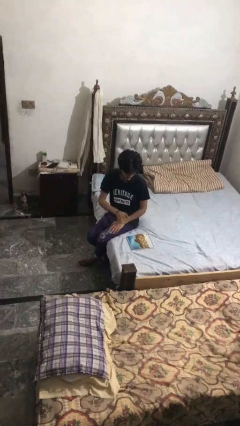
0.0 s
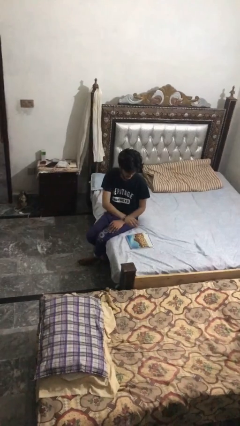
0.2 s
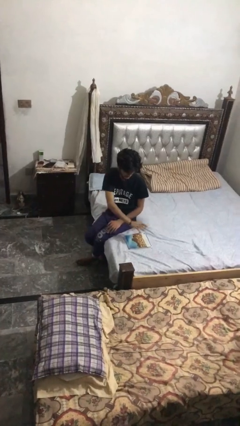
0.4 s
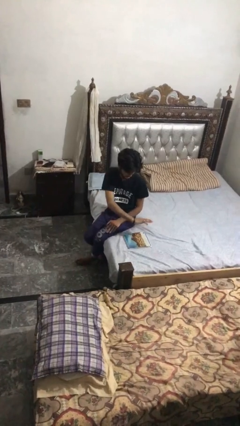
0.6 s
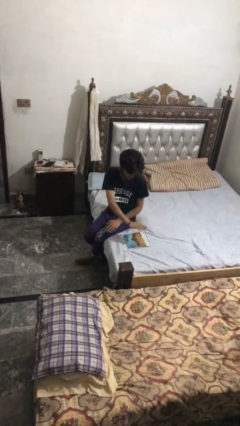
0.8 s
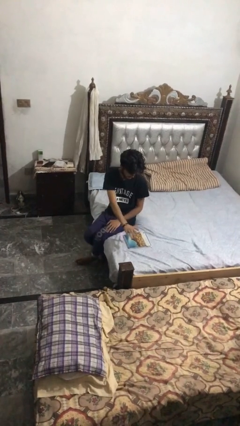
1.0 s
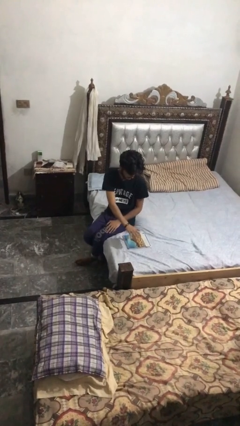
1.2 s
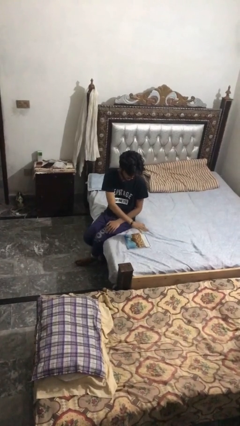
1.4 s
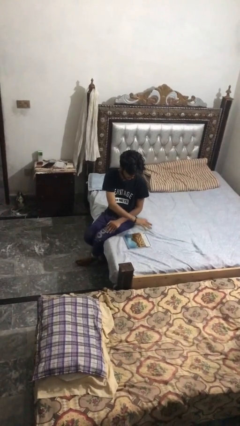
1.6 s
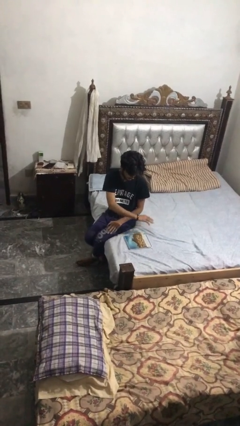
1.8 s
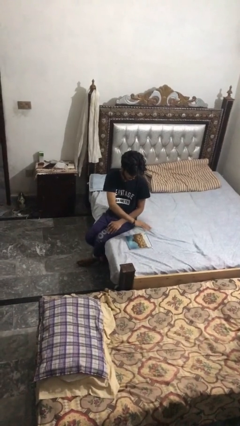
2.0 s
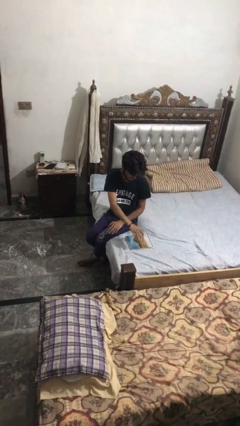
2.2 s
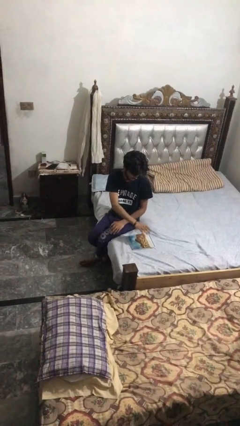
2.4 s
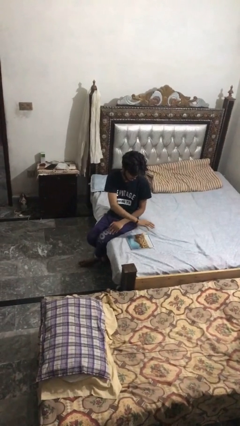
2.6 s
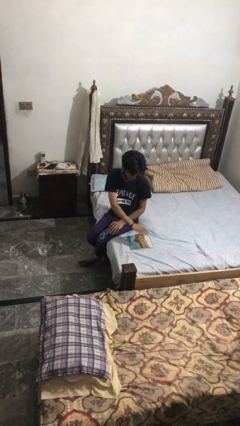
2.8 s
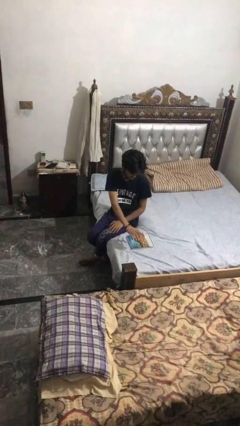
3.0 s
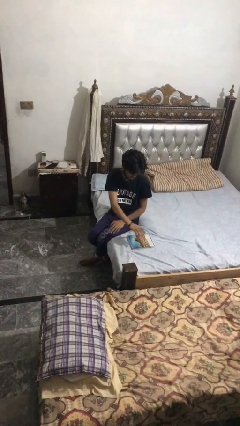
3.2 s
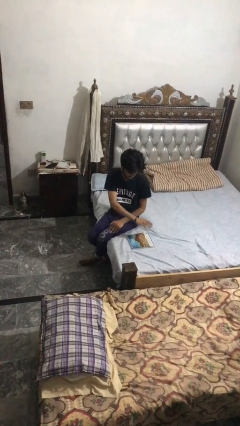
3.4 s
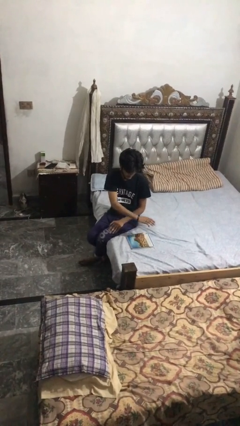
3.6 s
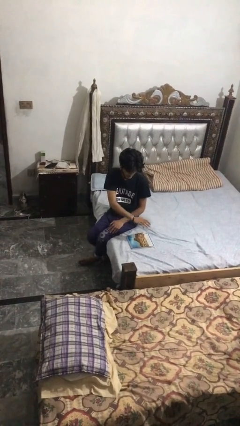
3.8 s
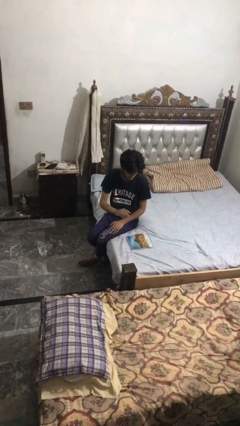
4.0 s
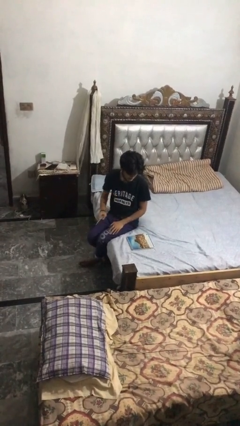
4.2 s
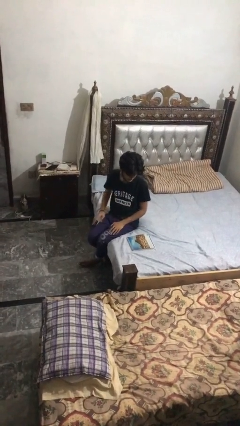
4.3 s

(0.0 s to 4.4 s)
person waves hand over object

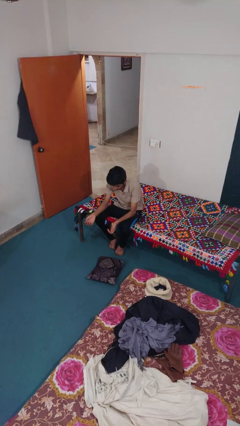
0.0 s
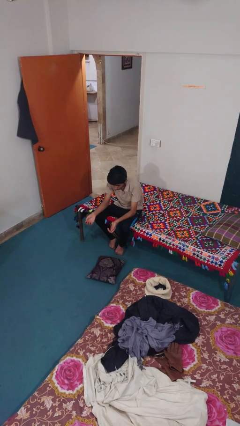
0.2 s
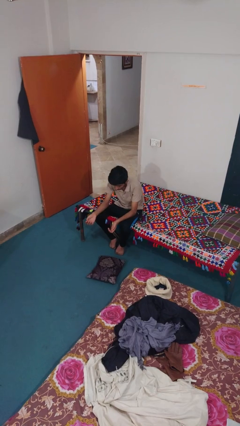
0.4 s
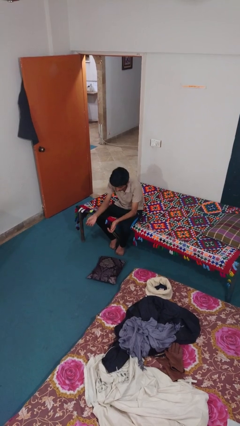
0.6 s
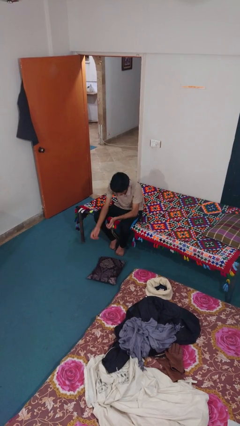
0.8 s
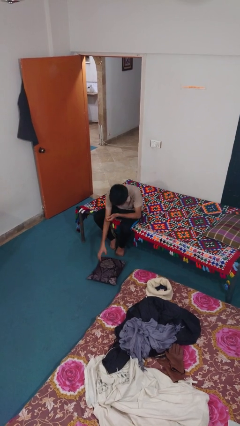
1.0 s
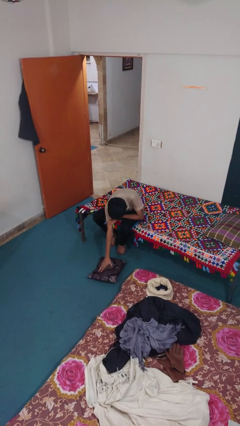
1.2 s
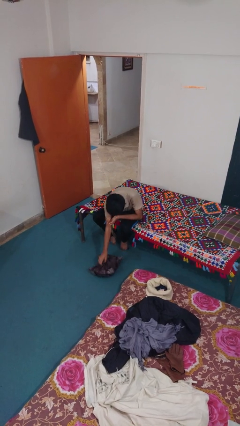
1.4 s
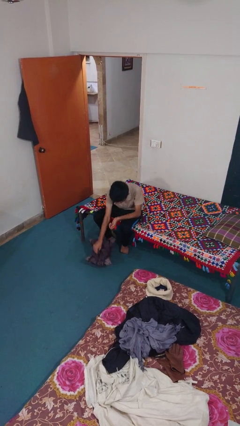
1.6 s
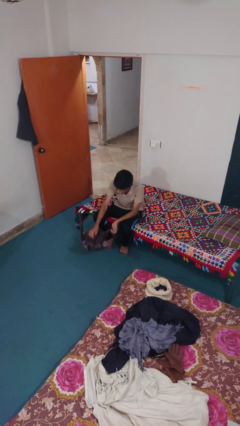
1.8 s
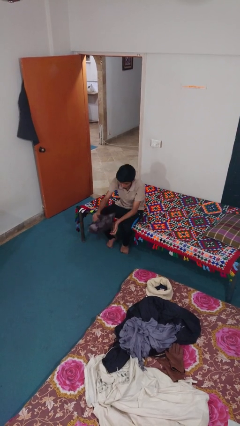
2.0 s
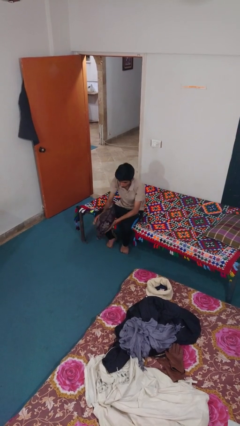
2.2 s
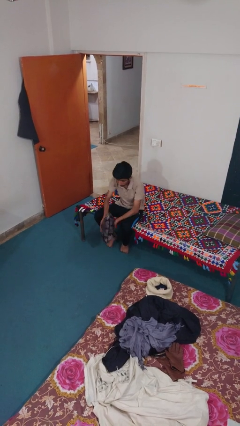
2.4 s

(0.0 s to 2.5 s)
person picks up object from floor

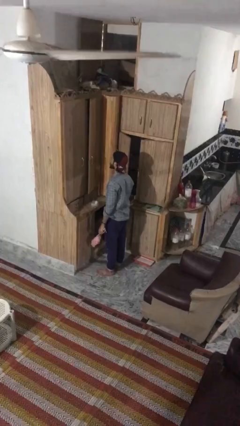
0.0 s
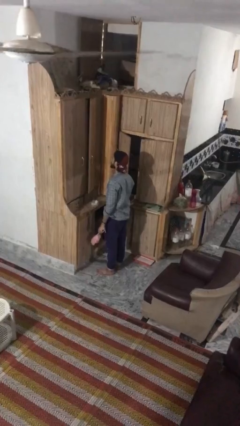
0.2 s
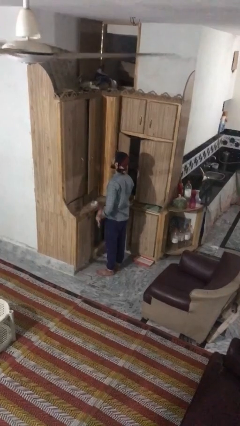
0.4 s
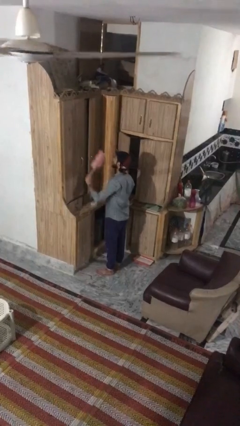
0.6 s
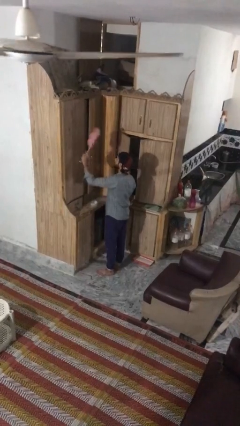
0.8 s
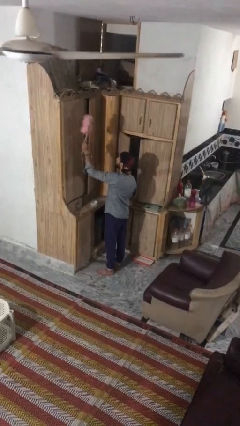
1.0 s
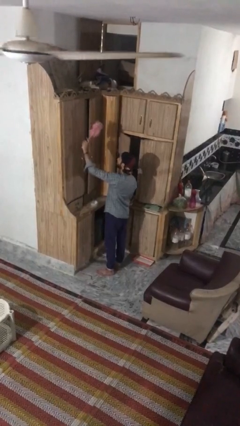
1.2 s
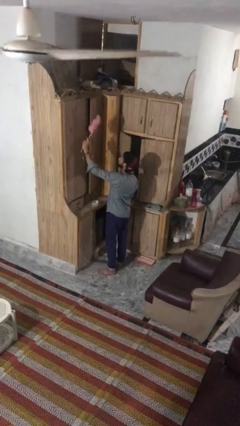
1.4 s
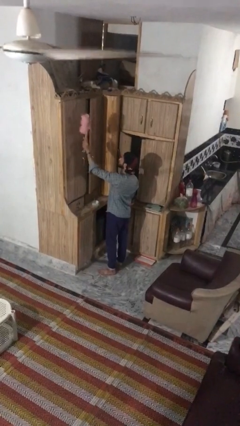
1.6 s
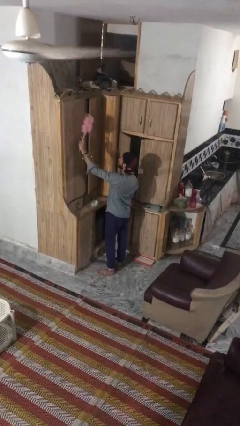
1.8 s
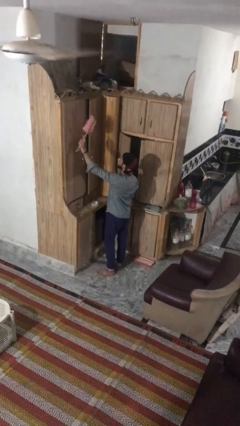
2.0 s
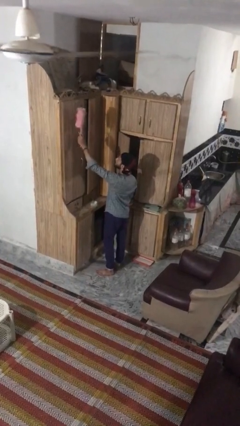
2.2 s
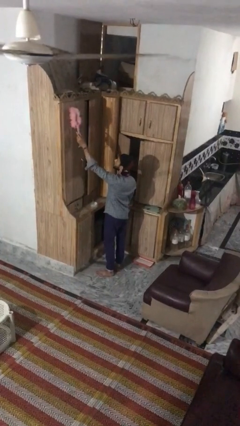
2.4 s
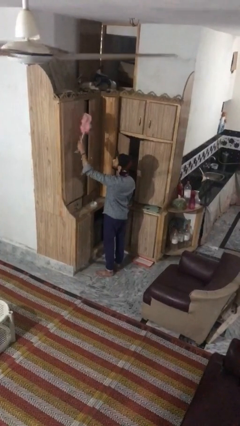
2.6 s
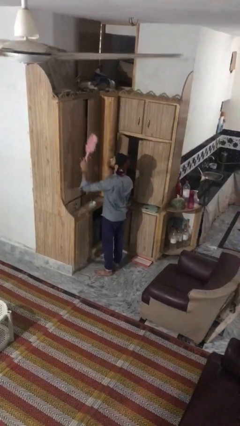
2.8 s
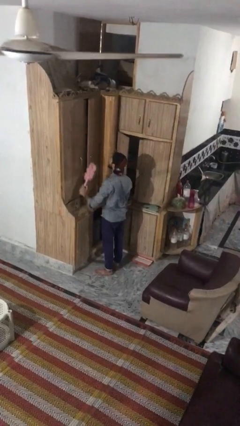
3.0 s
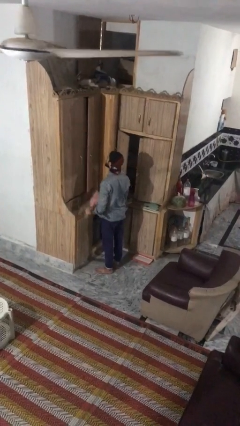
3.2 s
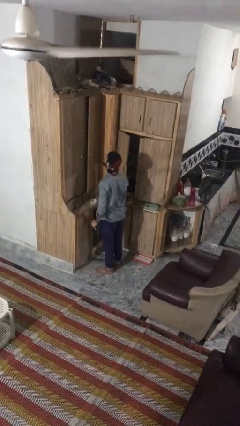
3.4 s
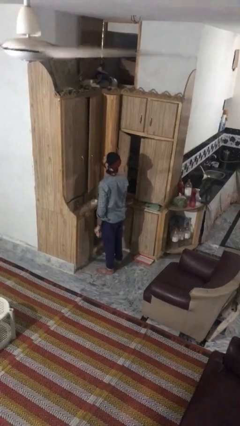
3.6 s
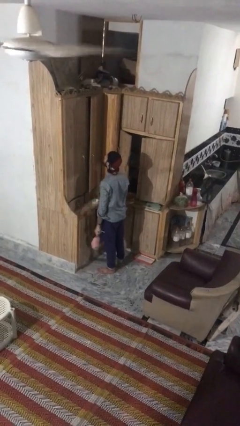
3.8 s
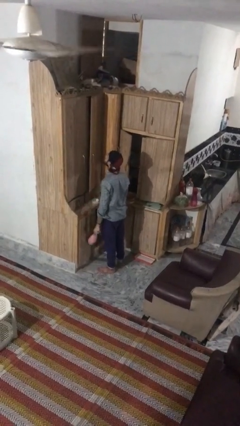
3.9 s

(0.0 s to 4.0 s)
person dusts furniture

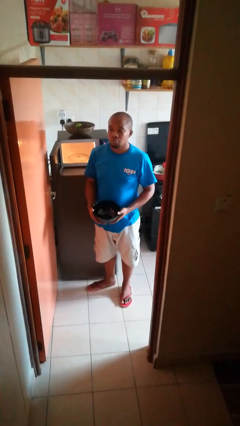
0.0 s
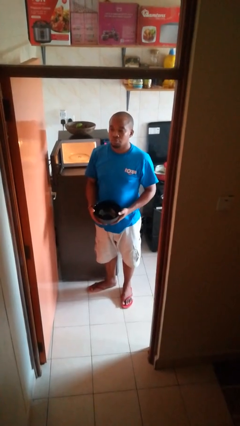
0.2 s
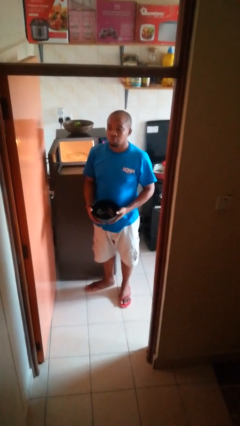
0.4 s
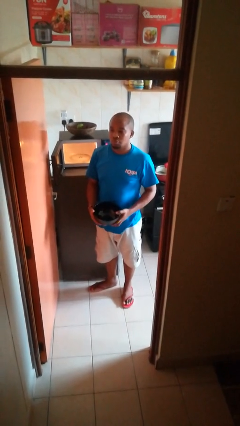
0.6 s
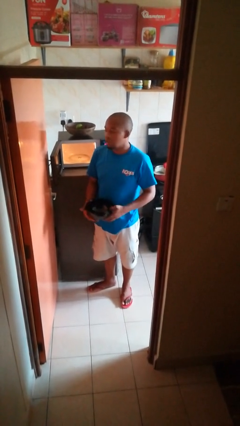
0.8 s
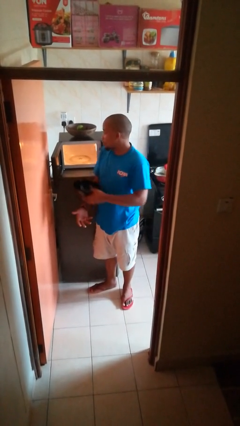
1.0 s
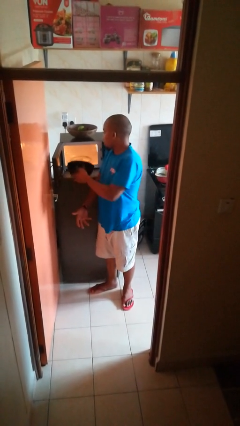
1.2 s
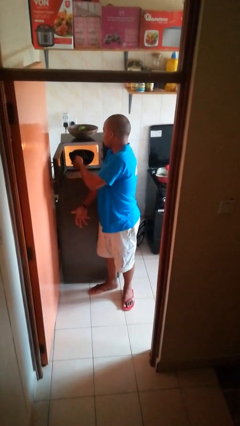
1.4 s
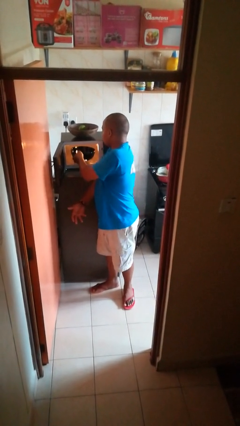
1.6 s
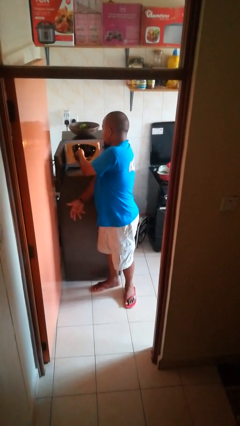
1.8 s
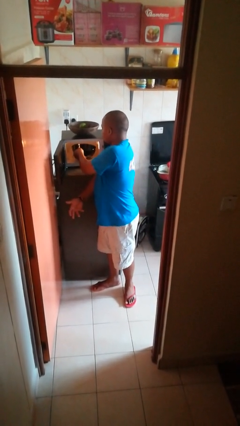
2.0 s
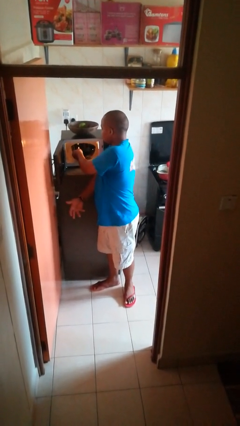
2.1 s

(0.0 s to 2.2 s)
person puts object into microwave

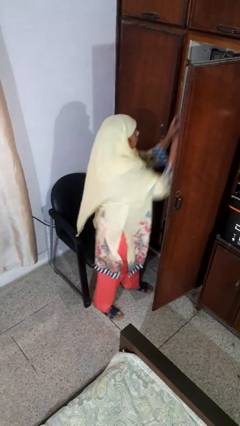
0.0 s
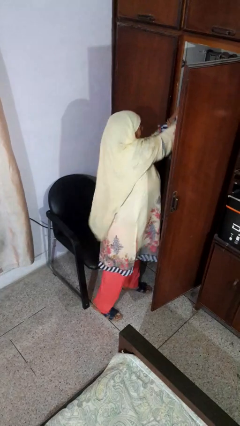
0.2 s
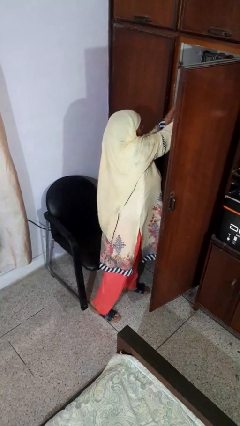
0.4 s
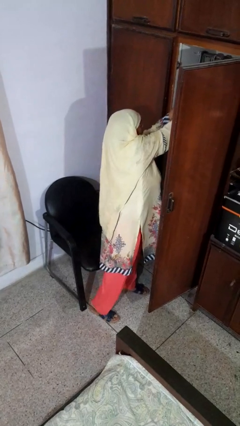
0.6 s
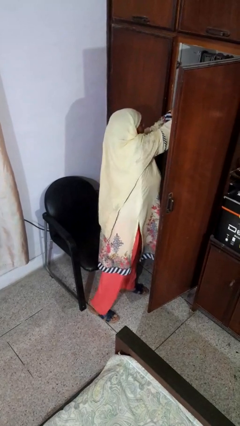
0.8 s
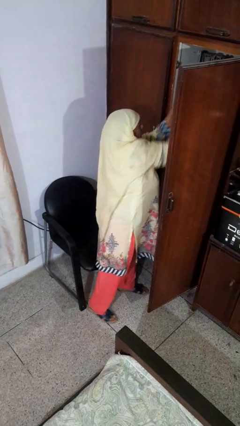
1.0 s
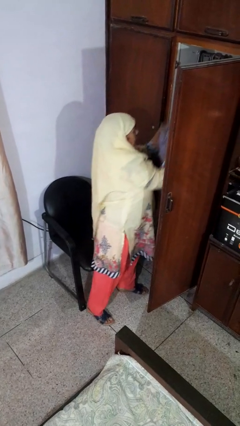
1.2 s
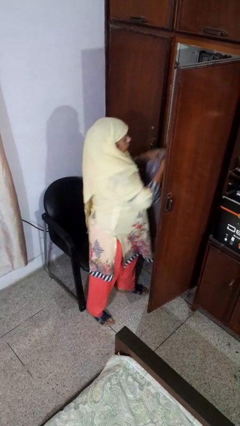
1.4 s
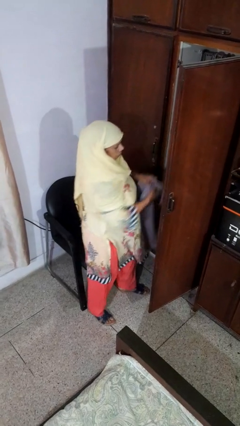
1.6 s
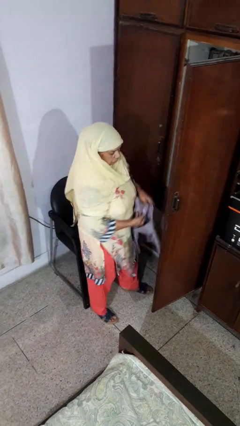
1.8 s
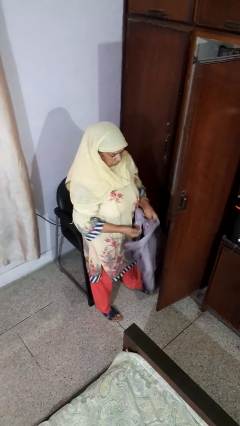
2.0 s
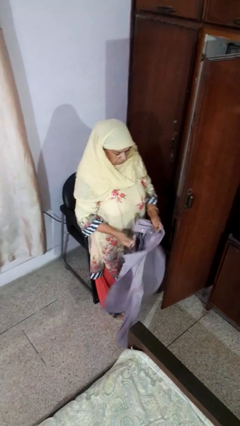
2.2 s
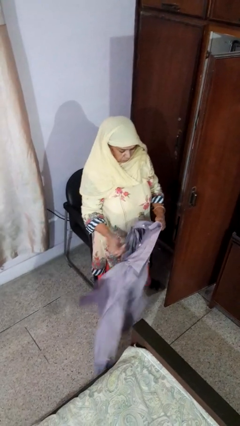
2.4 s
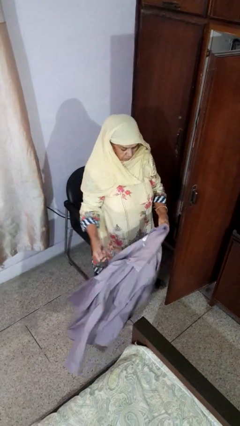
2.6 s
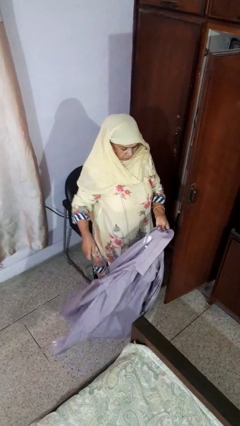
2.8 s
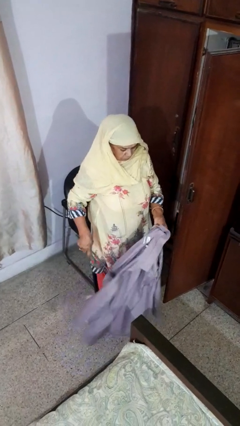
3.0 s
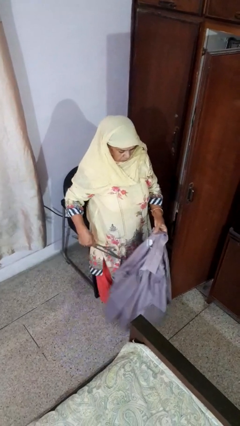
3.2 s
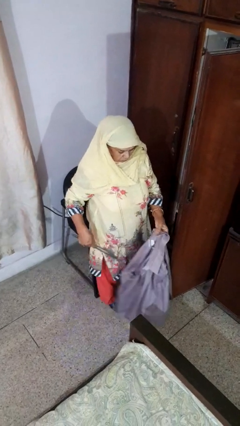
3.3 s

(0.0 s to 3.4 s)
person takes clothes from closet

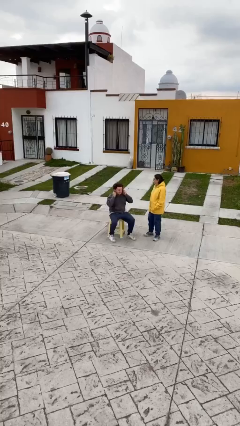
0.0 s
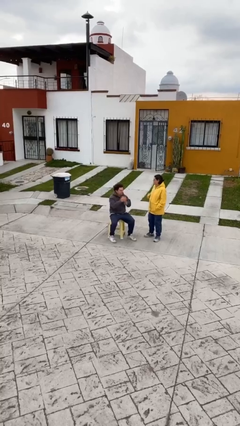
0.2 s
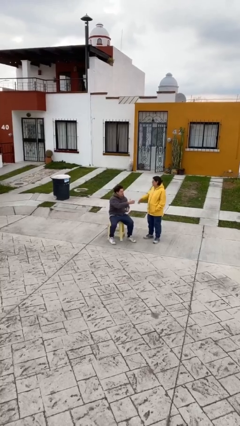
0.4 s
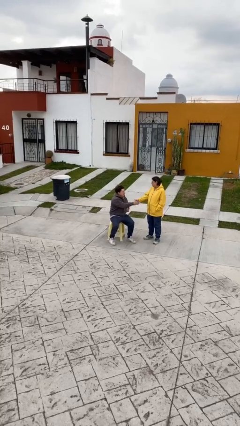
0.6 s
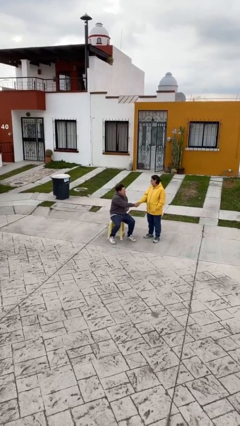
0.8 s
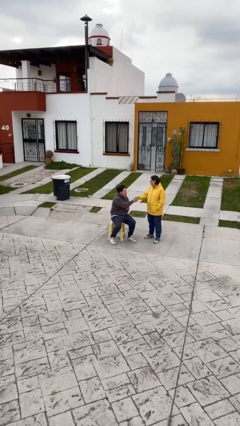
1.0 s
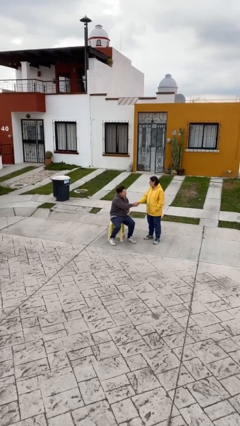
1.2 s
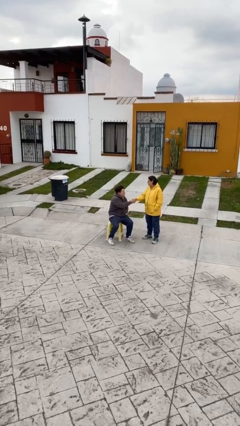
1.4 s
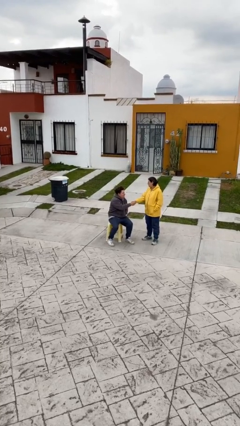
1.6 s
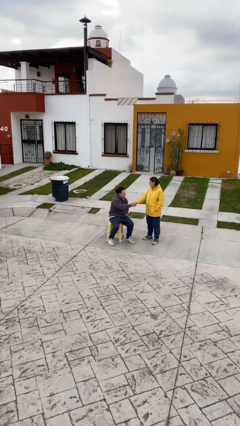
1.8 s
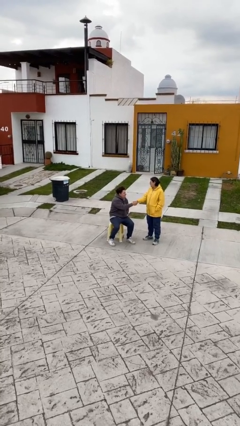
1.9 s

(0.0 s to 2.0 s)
person shakes hand
